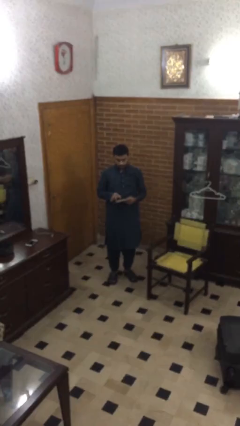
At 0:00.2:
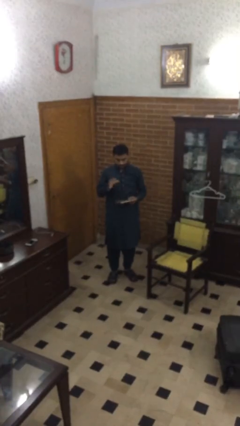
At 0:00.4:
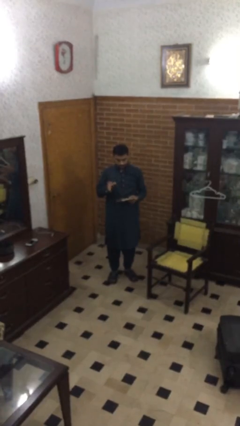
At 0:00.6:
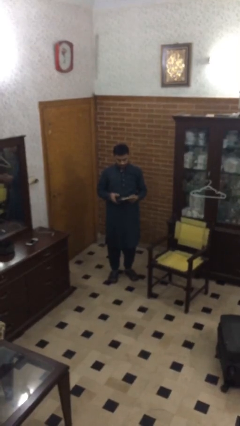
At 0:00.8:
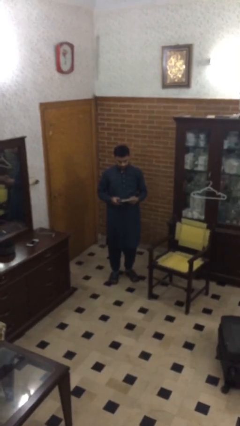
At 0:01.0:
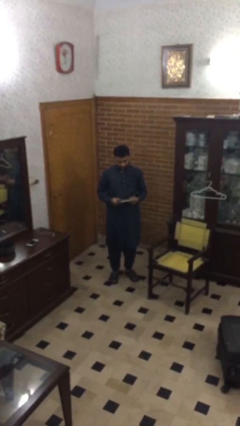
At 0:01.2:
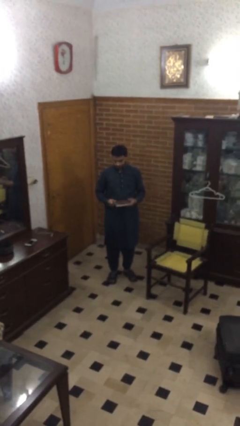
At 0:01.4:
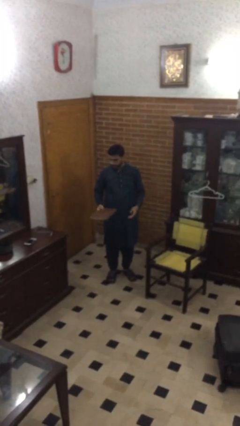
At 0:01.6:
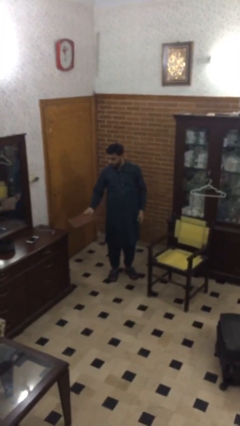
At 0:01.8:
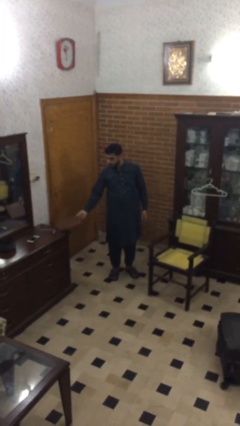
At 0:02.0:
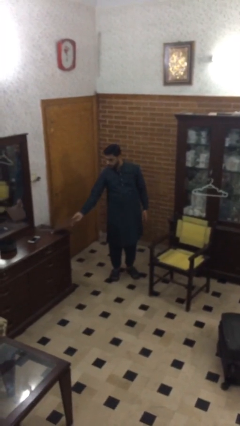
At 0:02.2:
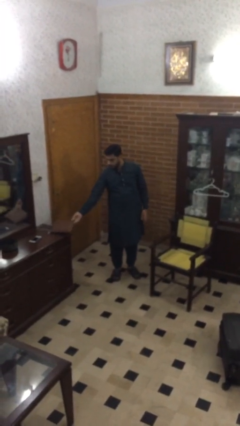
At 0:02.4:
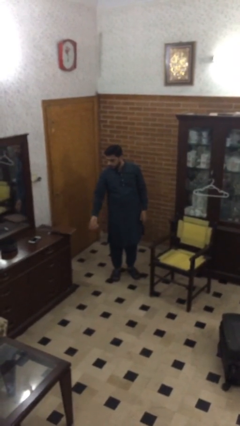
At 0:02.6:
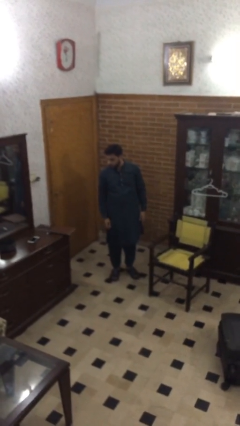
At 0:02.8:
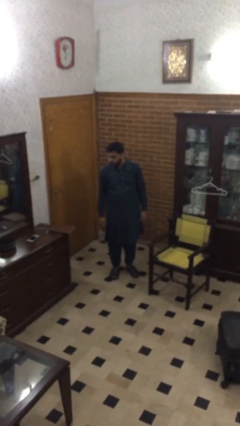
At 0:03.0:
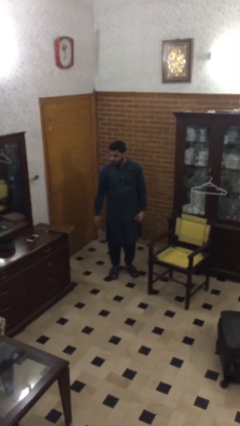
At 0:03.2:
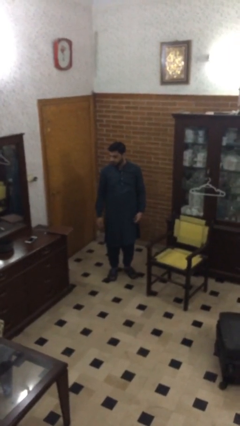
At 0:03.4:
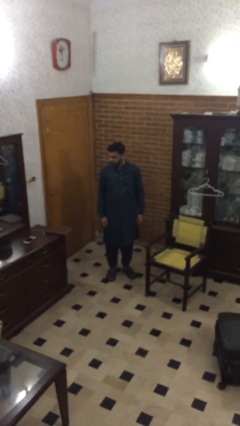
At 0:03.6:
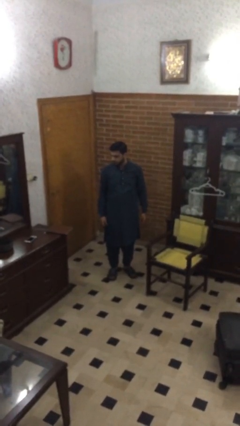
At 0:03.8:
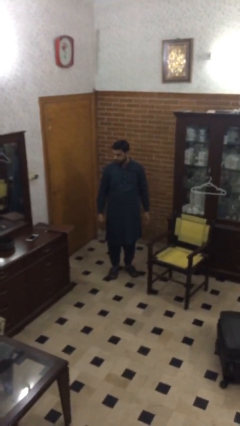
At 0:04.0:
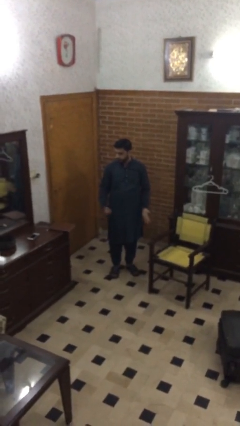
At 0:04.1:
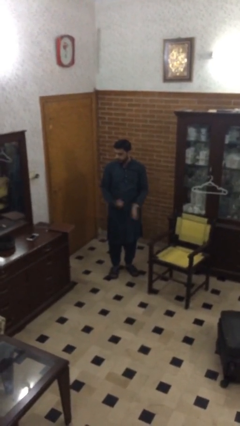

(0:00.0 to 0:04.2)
person puts down object on table

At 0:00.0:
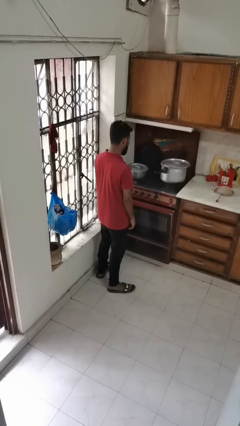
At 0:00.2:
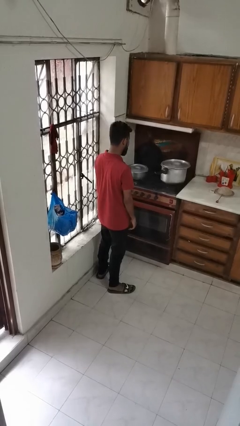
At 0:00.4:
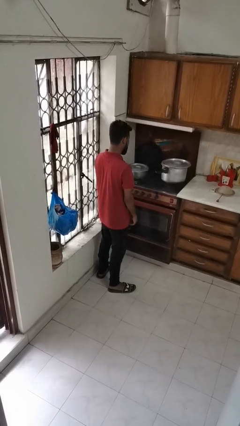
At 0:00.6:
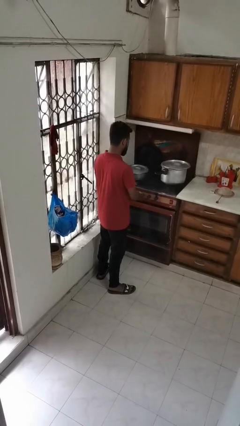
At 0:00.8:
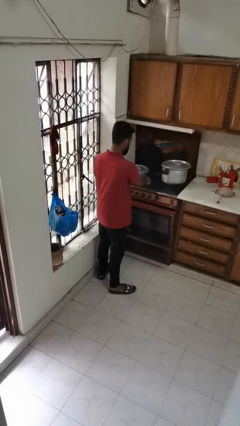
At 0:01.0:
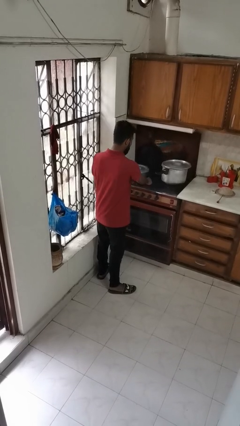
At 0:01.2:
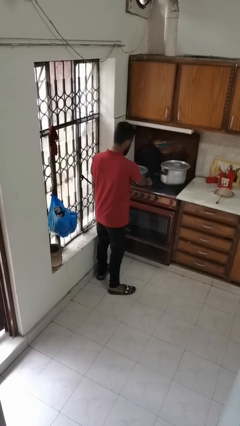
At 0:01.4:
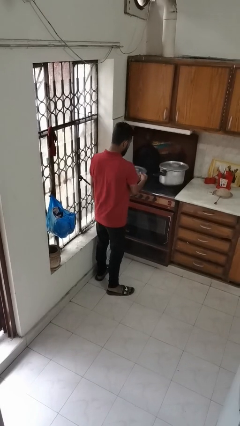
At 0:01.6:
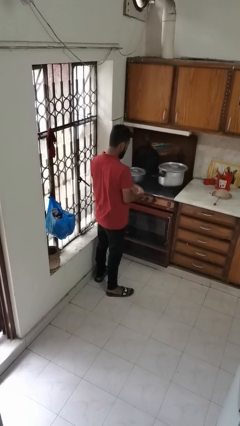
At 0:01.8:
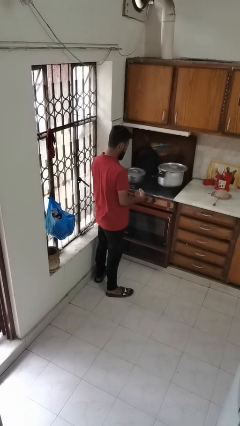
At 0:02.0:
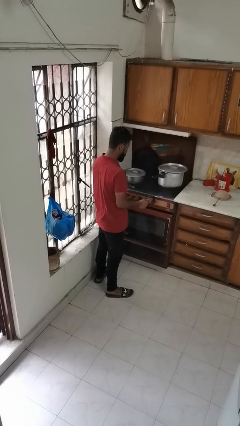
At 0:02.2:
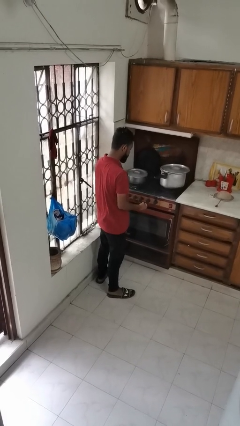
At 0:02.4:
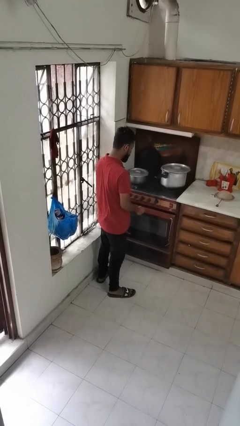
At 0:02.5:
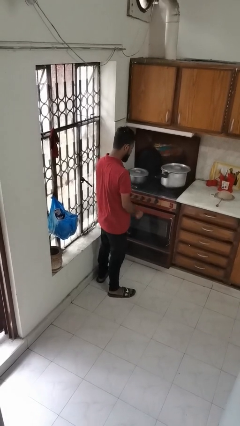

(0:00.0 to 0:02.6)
person burns hand

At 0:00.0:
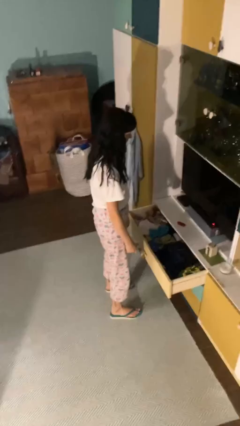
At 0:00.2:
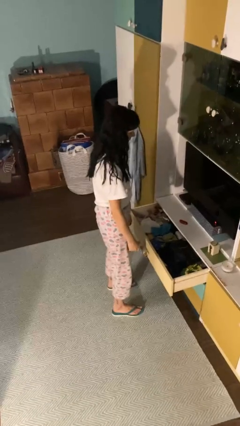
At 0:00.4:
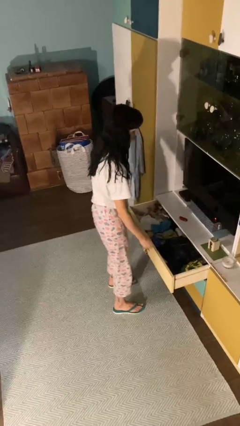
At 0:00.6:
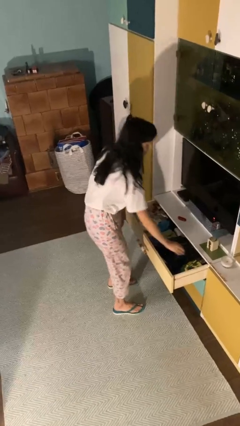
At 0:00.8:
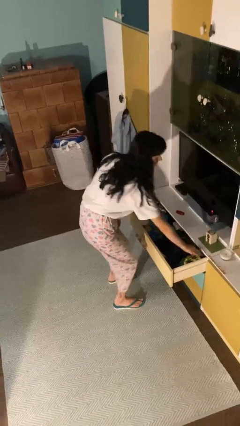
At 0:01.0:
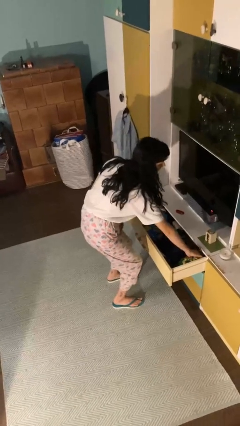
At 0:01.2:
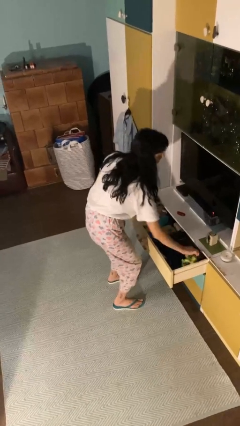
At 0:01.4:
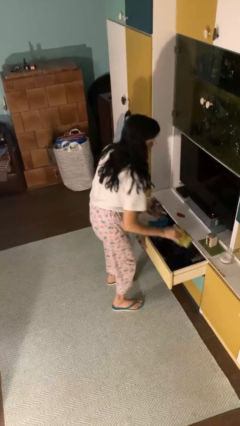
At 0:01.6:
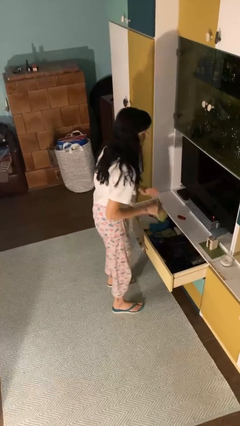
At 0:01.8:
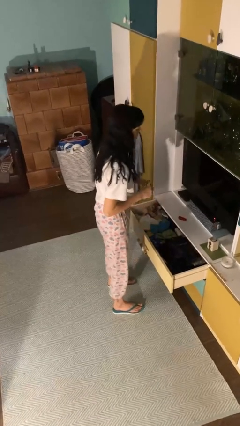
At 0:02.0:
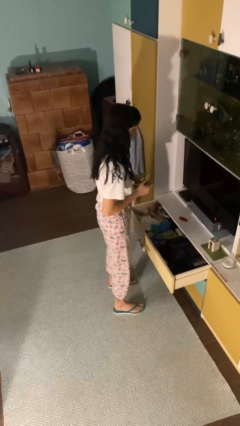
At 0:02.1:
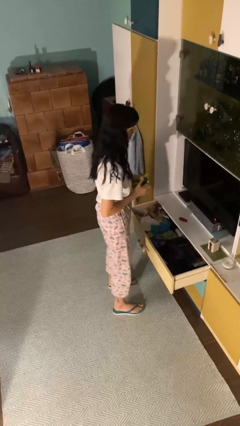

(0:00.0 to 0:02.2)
person takes clothes from dresser

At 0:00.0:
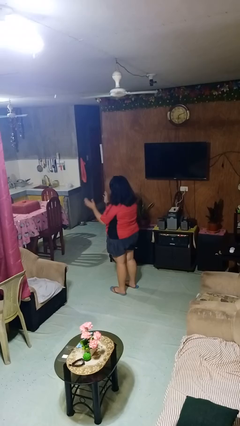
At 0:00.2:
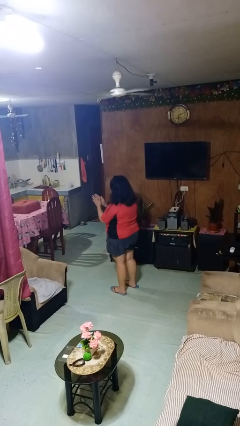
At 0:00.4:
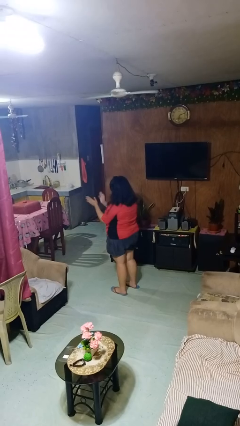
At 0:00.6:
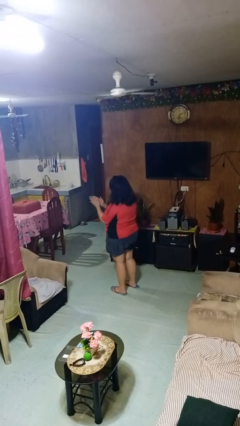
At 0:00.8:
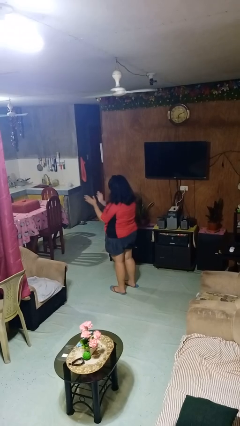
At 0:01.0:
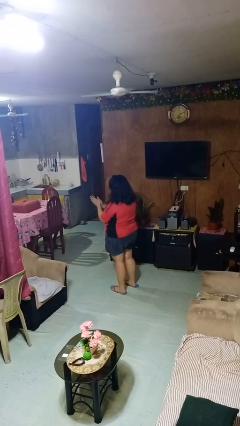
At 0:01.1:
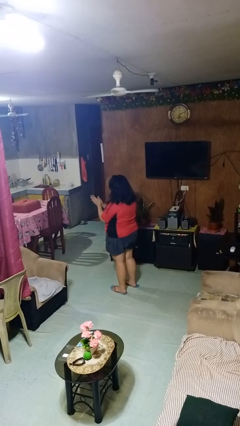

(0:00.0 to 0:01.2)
person claps hands

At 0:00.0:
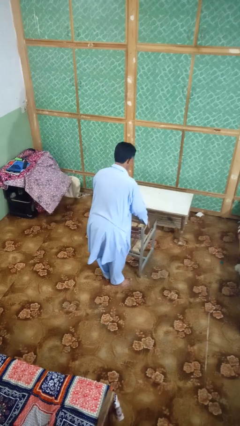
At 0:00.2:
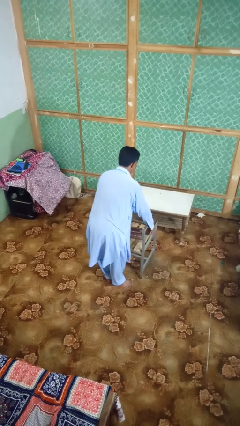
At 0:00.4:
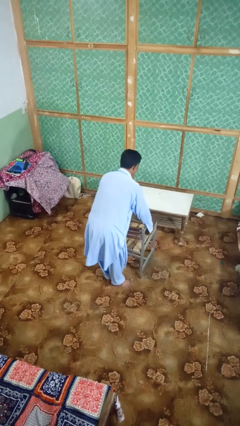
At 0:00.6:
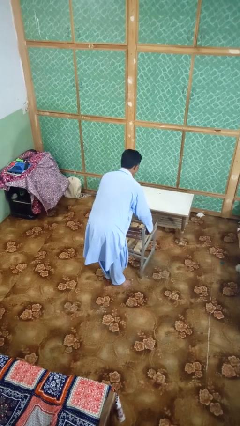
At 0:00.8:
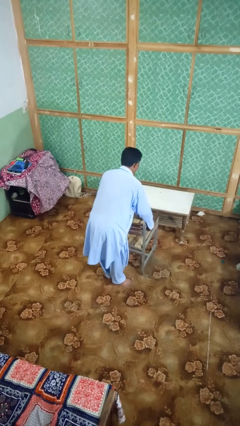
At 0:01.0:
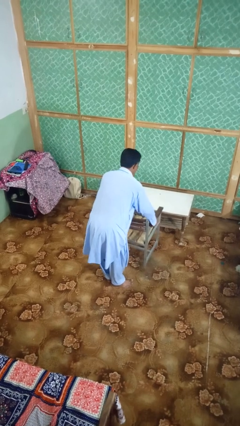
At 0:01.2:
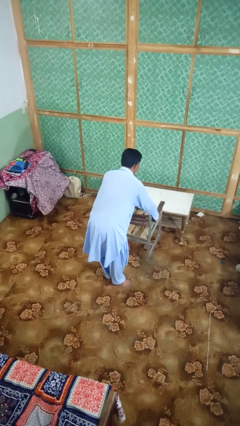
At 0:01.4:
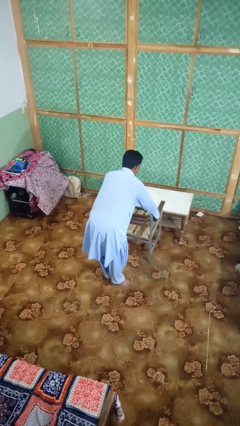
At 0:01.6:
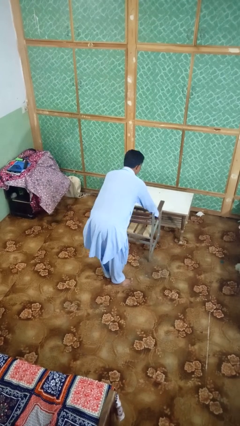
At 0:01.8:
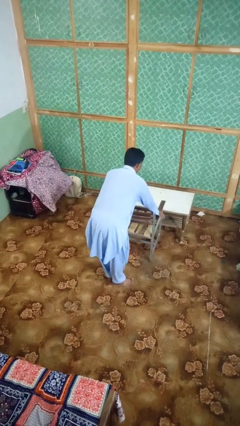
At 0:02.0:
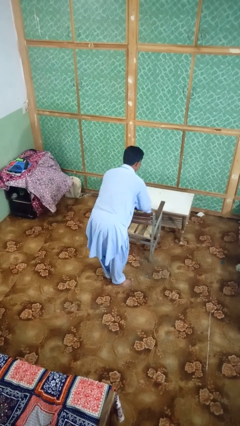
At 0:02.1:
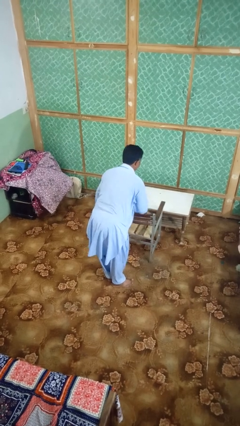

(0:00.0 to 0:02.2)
person pushes in chair

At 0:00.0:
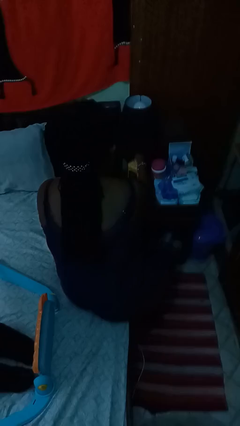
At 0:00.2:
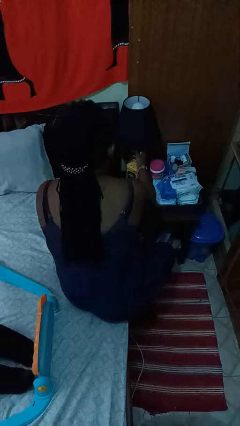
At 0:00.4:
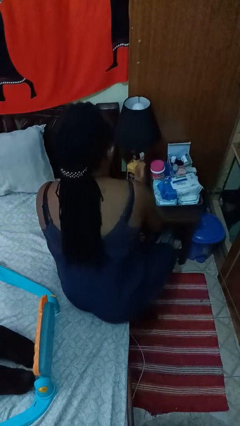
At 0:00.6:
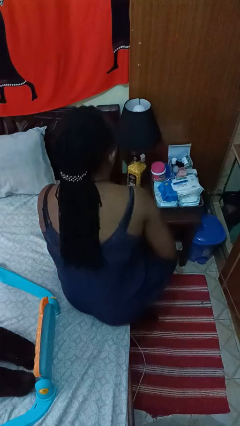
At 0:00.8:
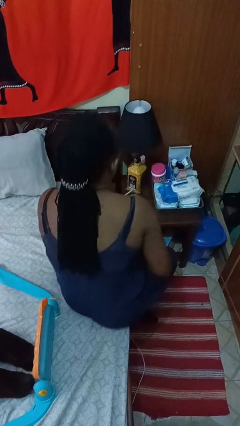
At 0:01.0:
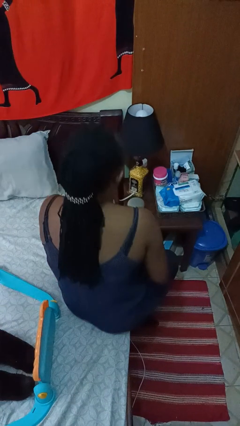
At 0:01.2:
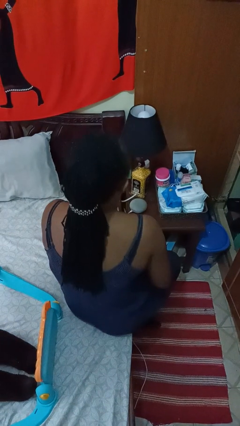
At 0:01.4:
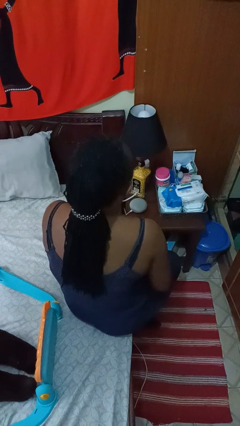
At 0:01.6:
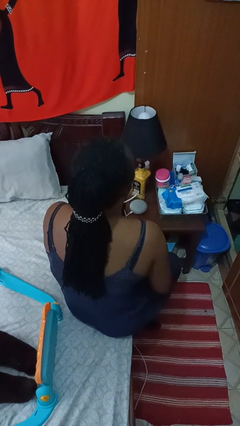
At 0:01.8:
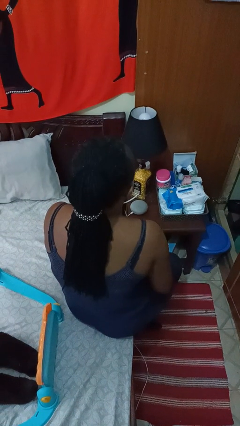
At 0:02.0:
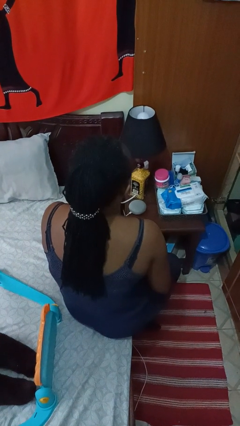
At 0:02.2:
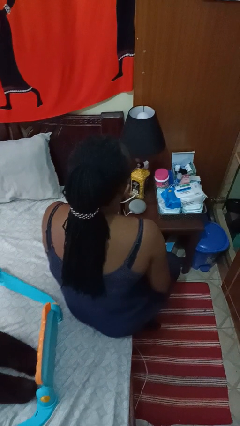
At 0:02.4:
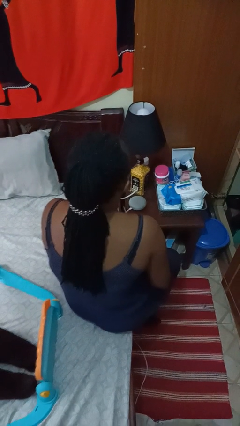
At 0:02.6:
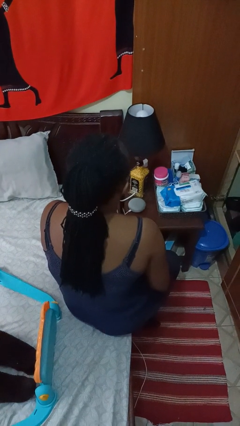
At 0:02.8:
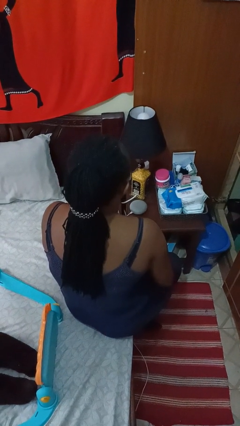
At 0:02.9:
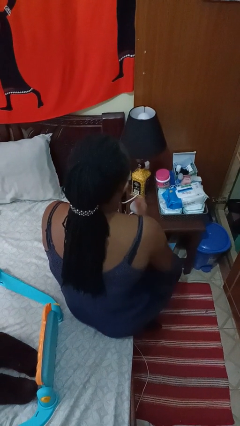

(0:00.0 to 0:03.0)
person turns off lamp

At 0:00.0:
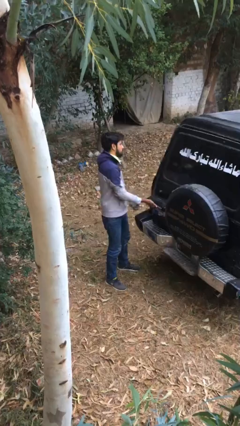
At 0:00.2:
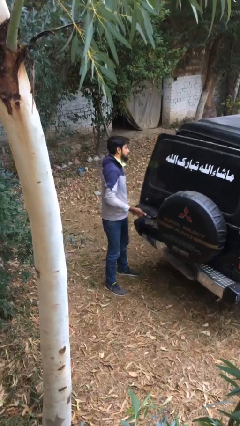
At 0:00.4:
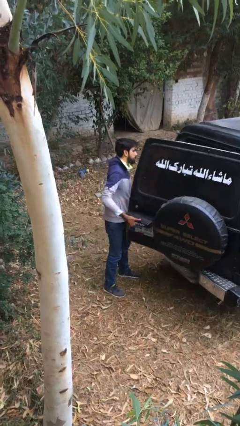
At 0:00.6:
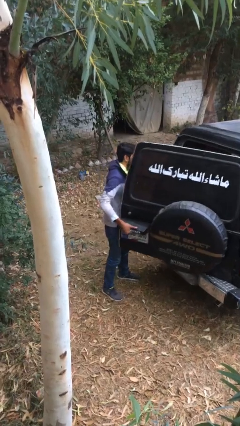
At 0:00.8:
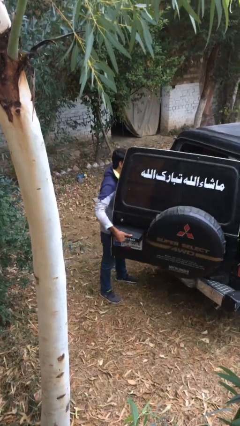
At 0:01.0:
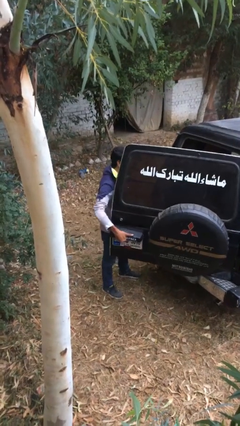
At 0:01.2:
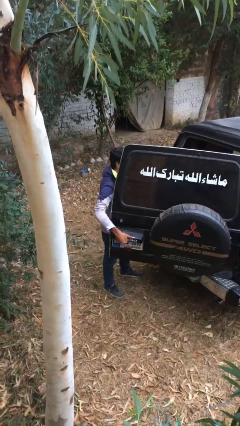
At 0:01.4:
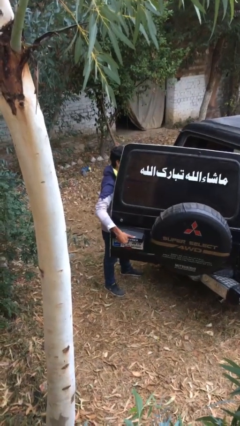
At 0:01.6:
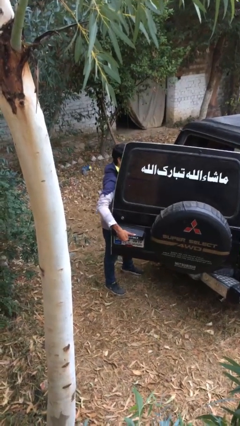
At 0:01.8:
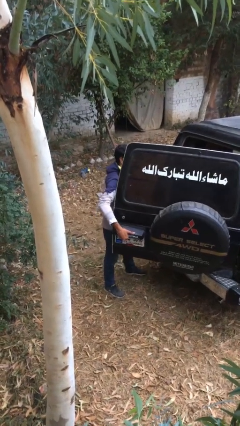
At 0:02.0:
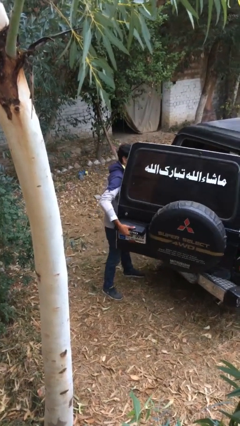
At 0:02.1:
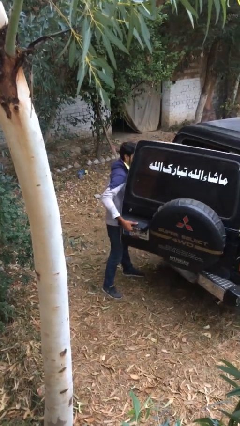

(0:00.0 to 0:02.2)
person opens car trunk
